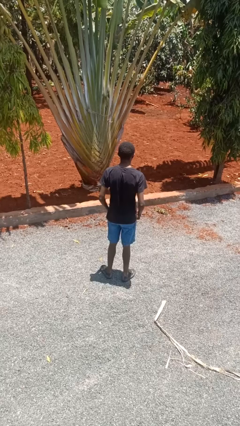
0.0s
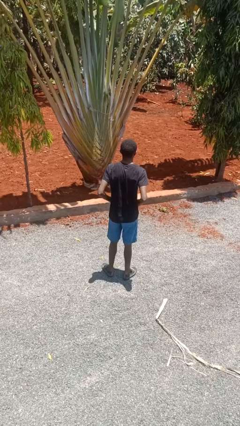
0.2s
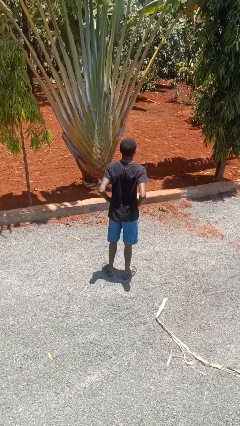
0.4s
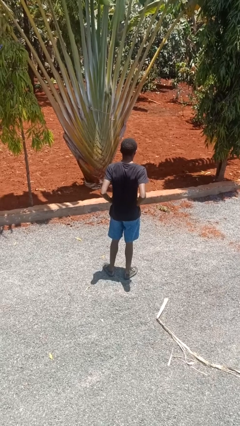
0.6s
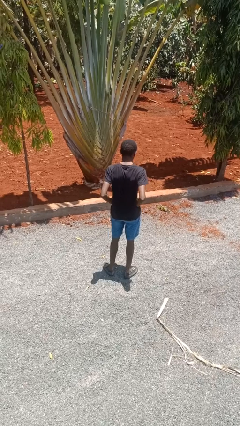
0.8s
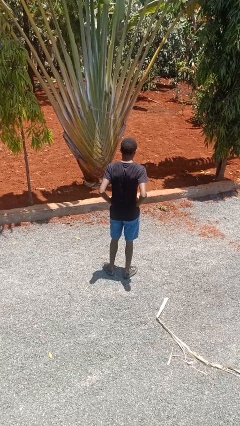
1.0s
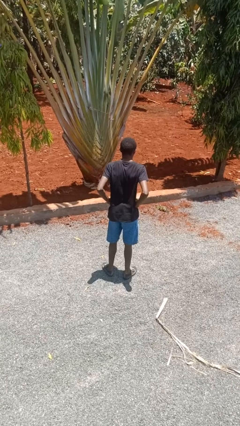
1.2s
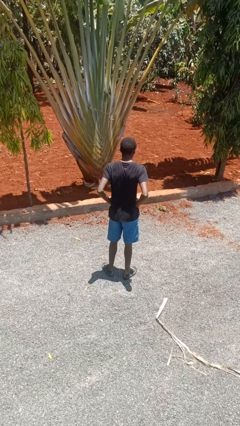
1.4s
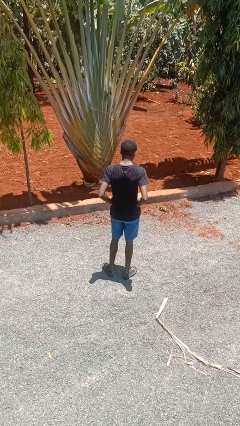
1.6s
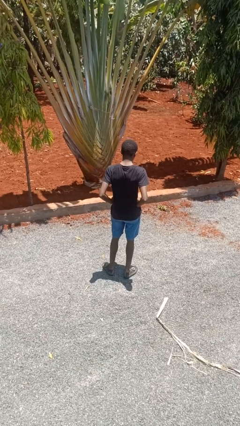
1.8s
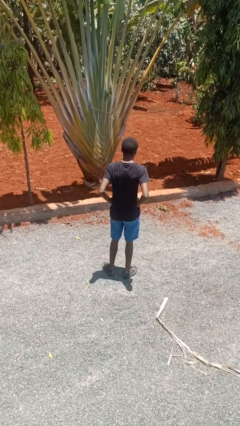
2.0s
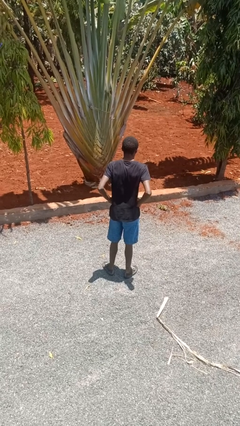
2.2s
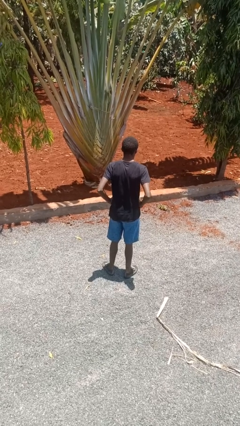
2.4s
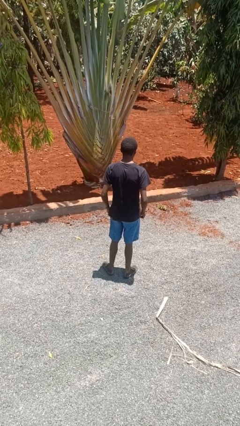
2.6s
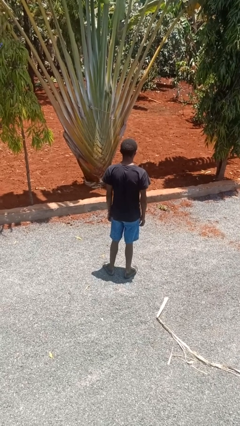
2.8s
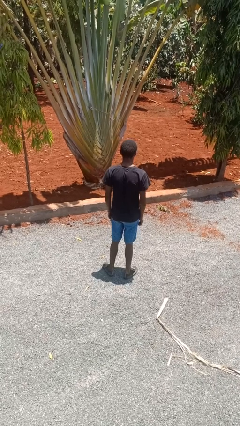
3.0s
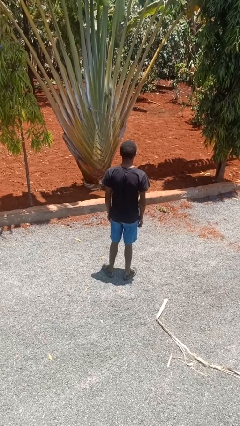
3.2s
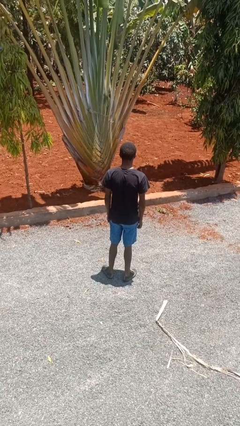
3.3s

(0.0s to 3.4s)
person wiggles hips

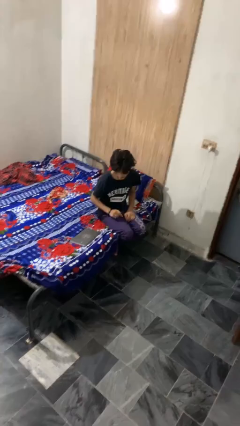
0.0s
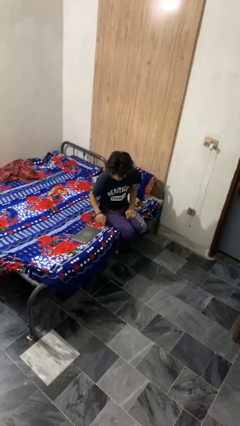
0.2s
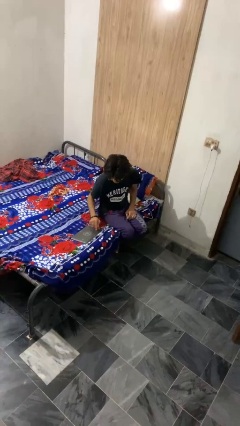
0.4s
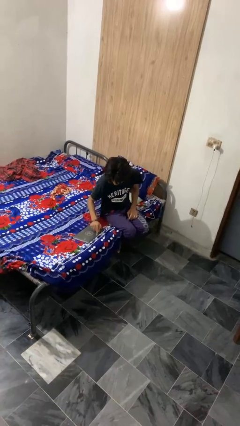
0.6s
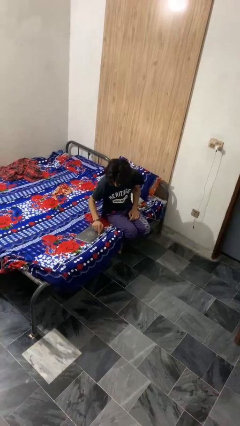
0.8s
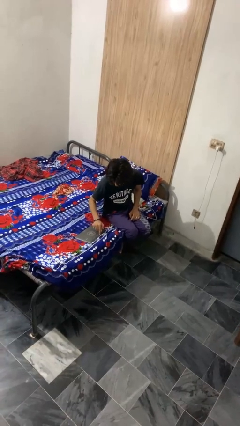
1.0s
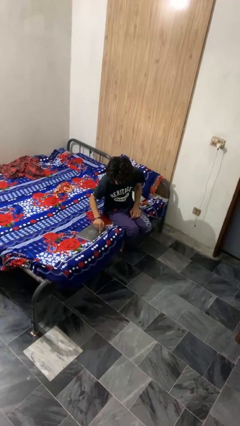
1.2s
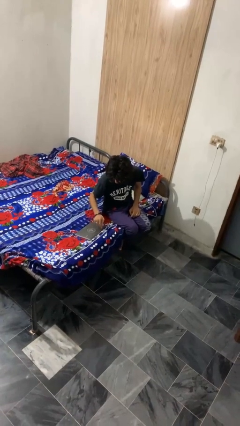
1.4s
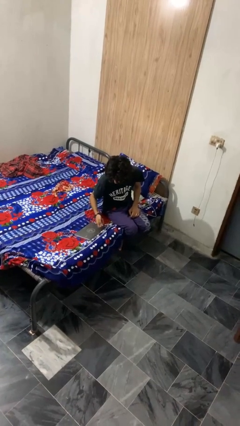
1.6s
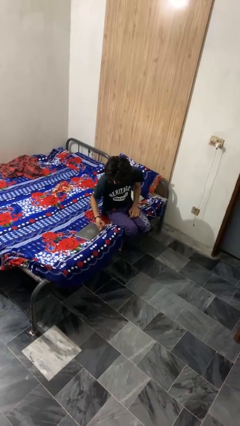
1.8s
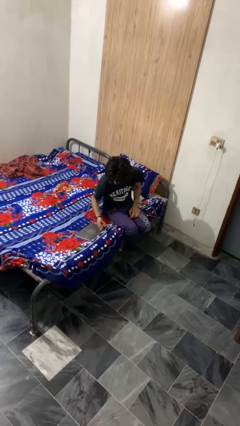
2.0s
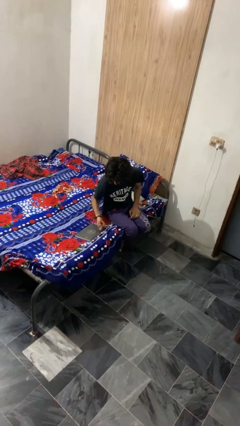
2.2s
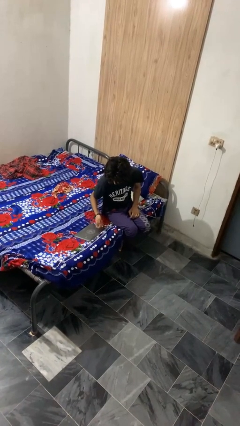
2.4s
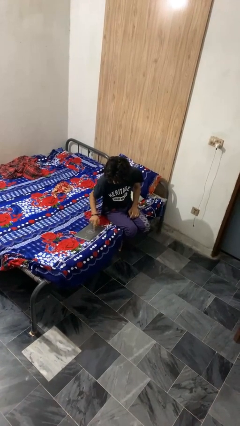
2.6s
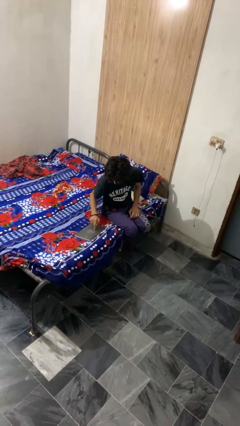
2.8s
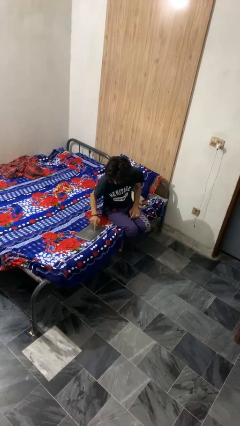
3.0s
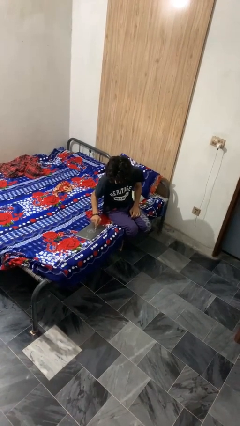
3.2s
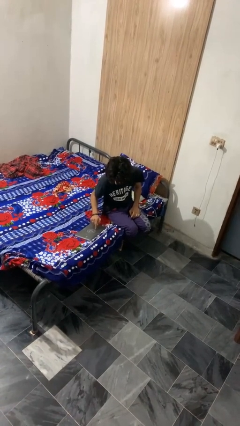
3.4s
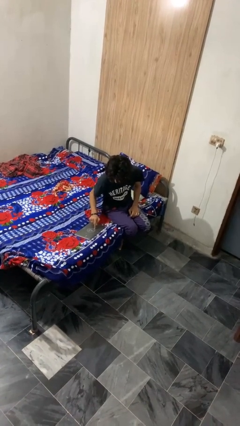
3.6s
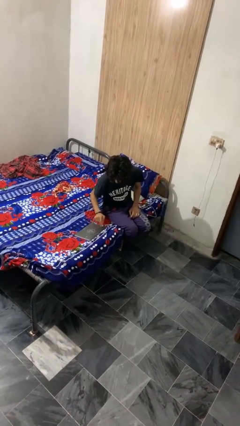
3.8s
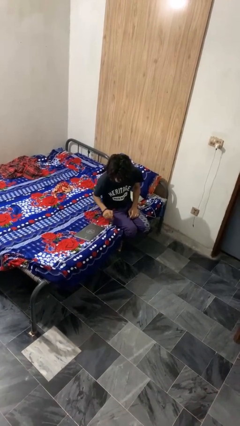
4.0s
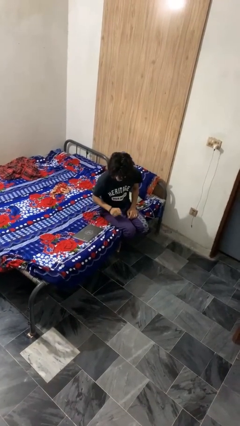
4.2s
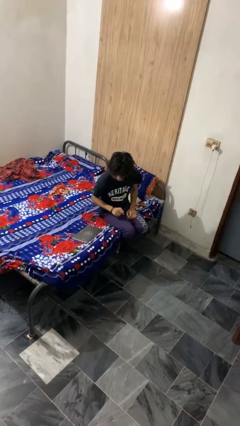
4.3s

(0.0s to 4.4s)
person taps object with finger

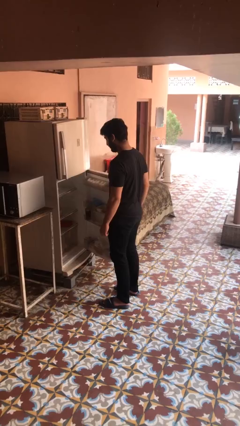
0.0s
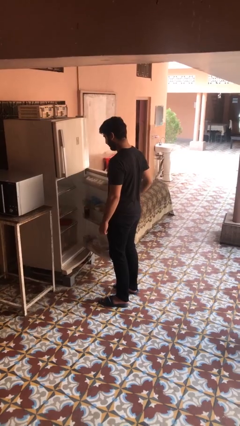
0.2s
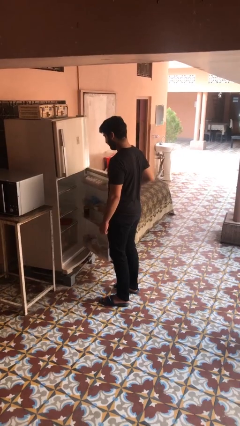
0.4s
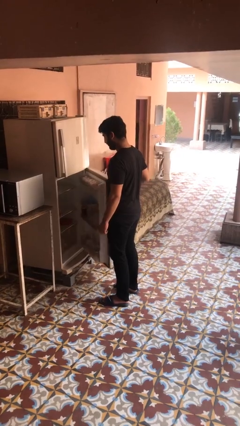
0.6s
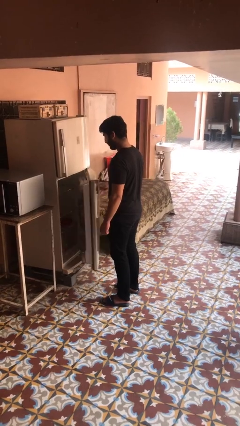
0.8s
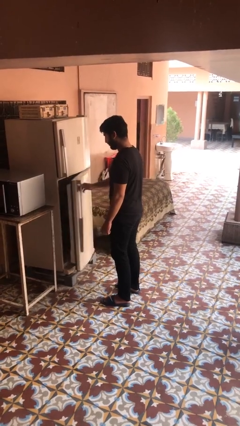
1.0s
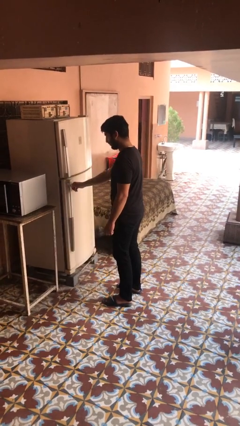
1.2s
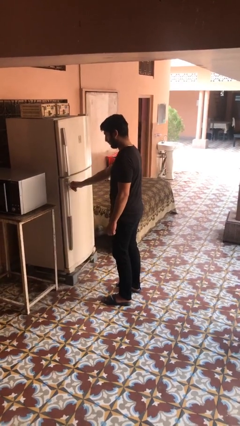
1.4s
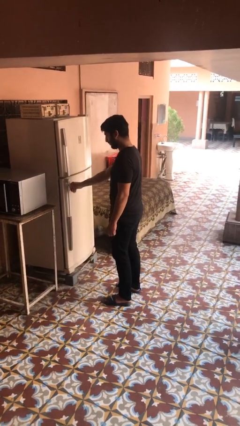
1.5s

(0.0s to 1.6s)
person closes refrigerator

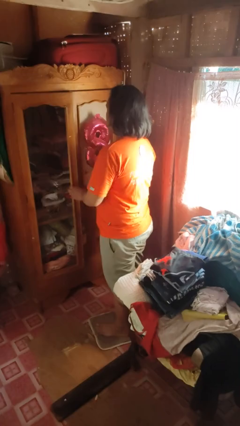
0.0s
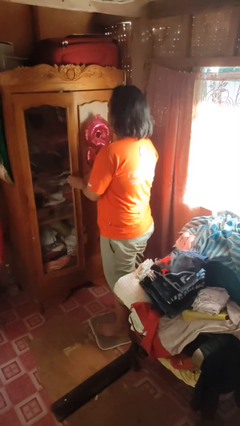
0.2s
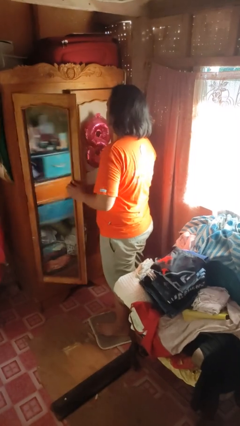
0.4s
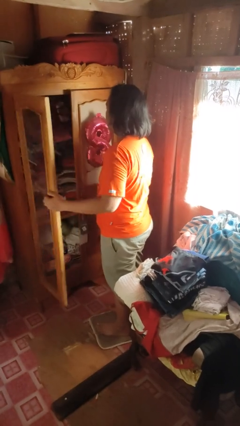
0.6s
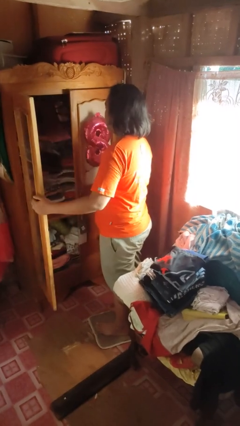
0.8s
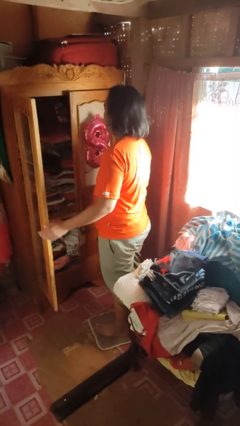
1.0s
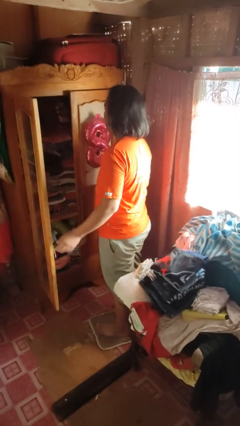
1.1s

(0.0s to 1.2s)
person opens dresser drawer

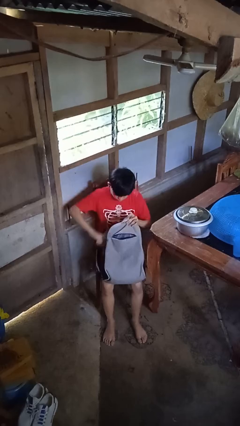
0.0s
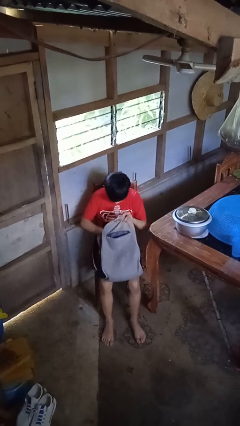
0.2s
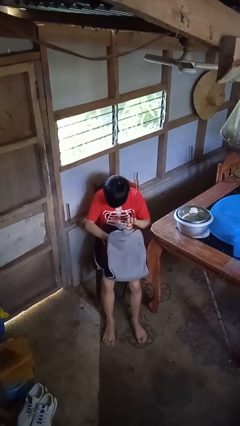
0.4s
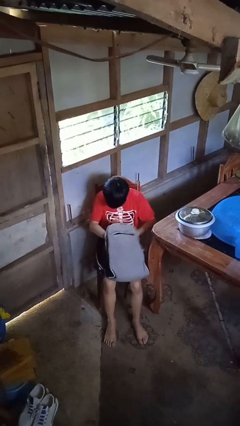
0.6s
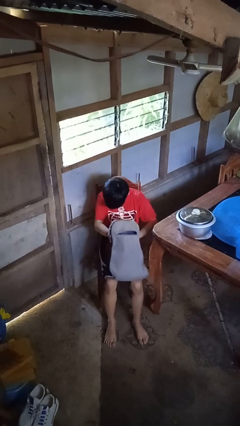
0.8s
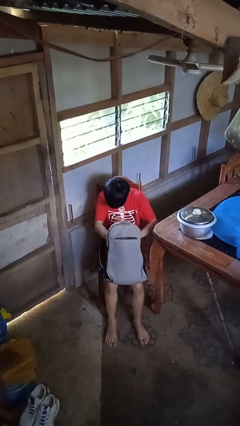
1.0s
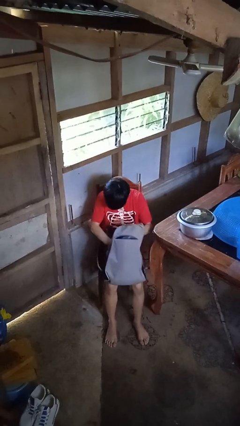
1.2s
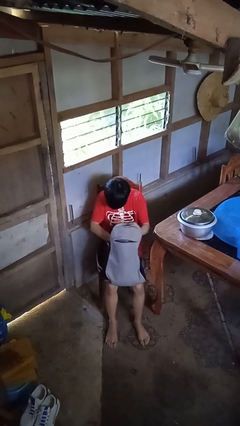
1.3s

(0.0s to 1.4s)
person searches in backpack

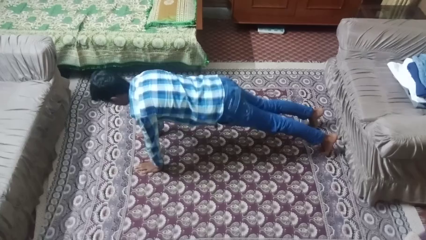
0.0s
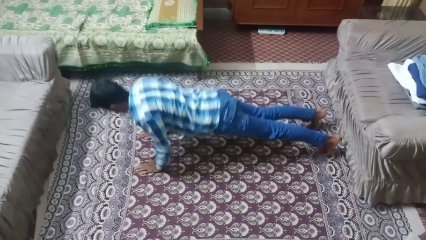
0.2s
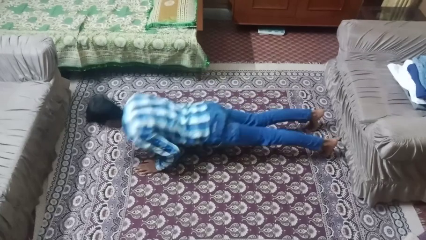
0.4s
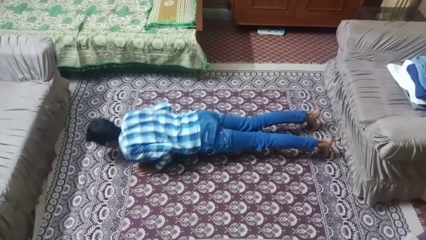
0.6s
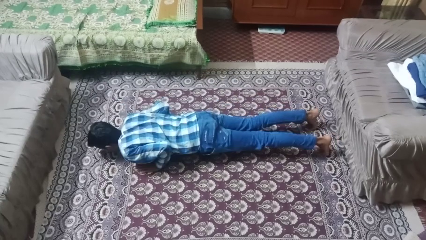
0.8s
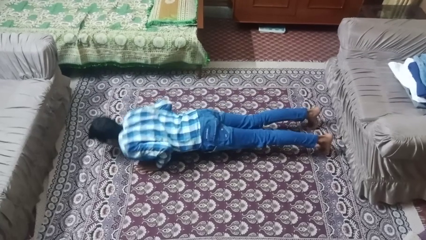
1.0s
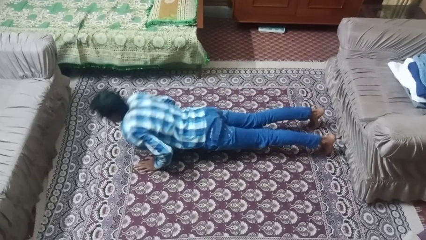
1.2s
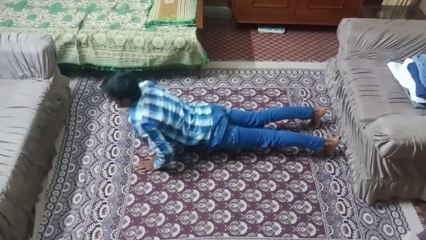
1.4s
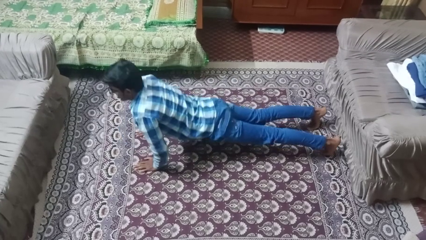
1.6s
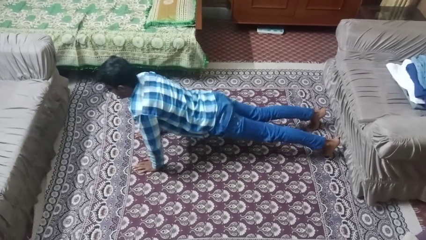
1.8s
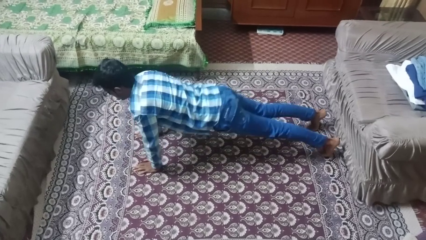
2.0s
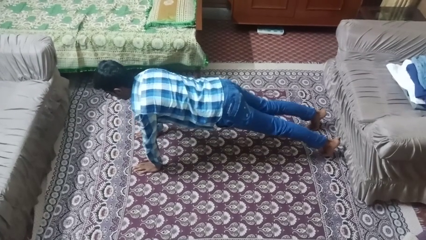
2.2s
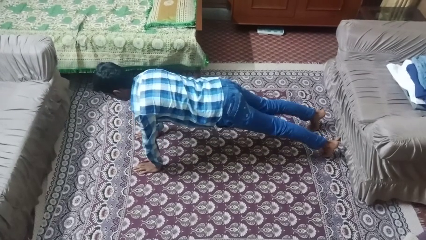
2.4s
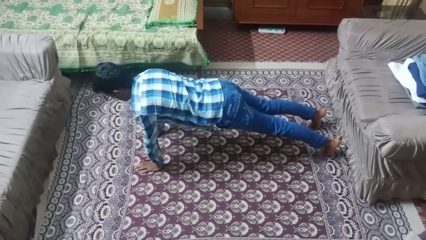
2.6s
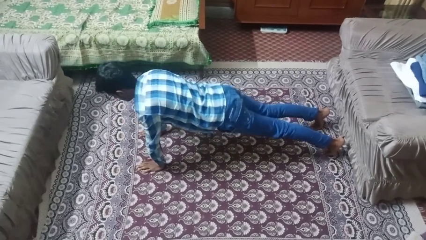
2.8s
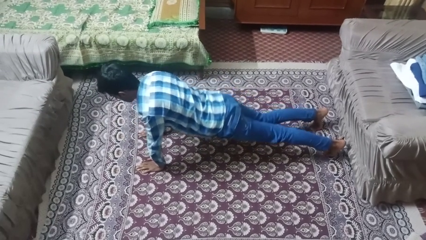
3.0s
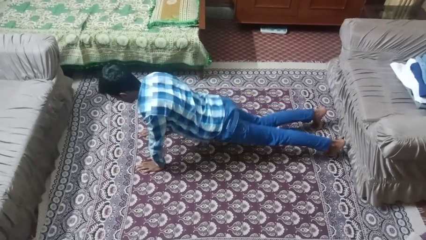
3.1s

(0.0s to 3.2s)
person exercises with pushup

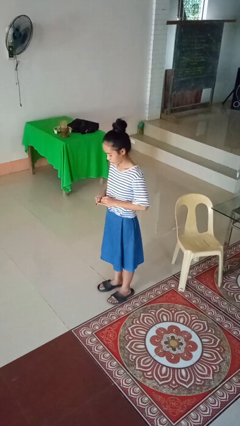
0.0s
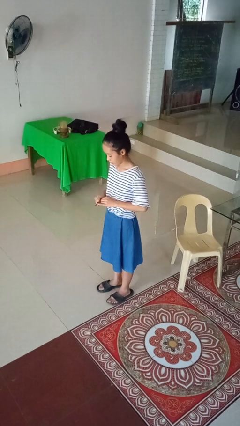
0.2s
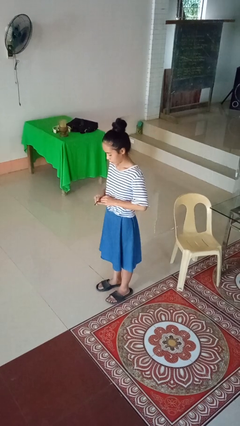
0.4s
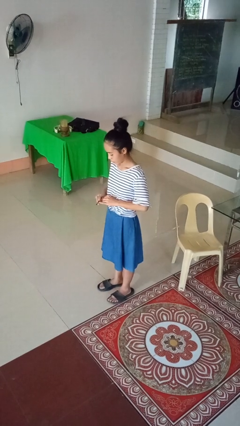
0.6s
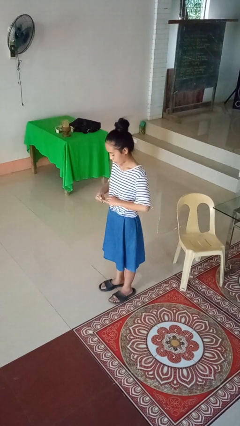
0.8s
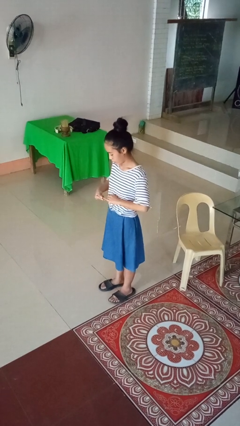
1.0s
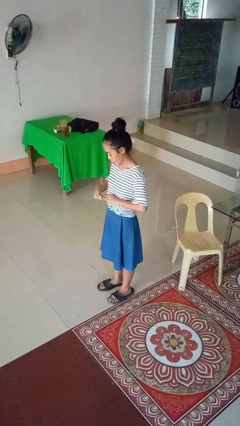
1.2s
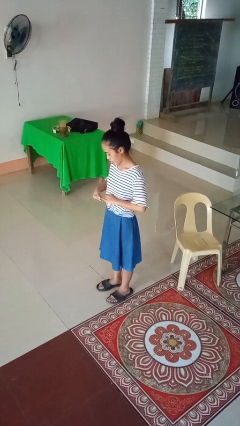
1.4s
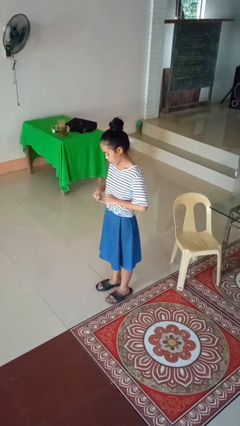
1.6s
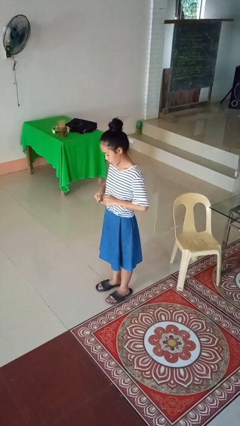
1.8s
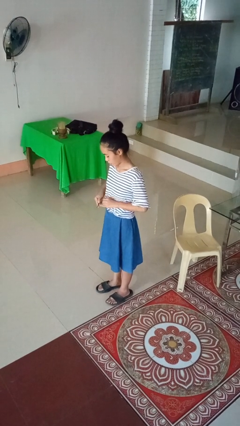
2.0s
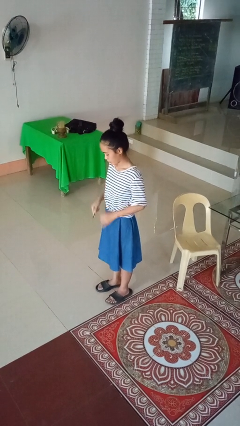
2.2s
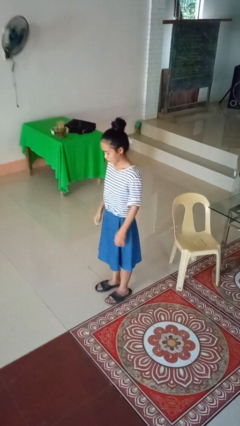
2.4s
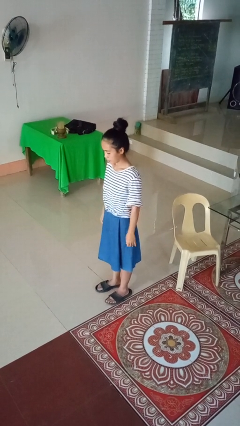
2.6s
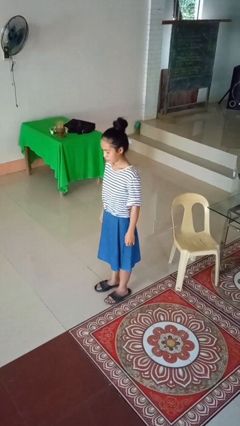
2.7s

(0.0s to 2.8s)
person files fingernails
